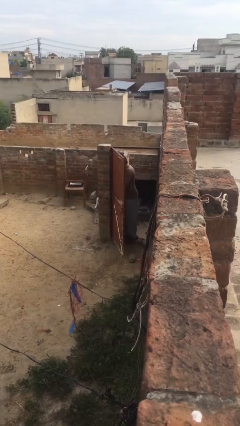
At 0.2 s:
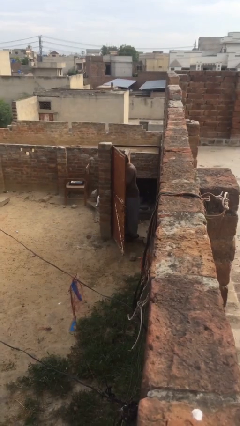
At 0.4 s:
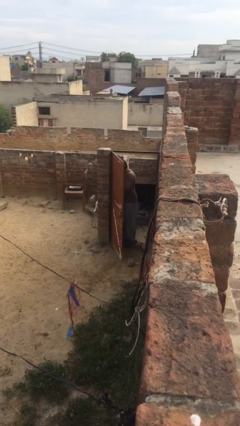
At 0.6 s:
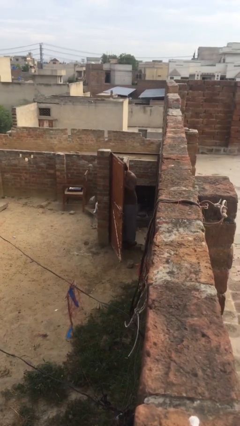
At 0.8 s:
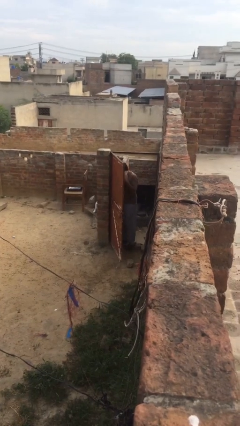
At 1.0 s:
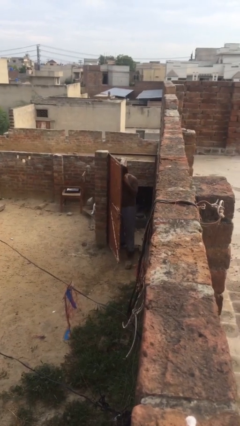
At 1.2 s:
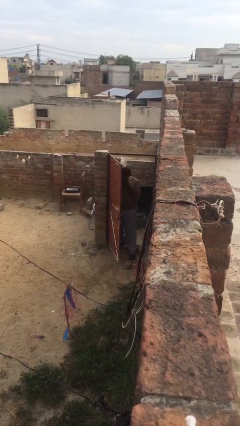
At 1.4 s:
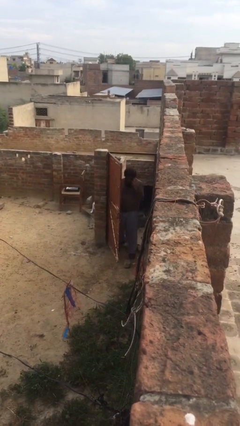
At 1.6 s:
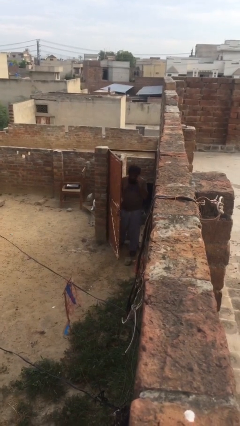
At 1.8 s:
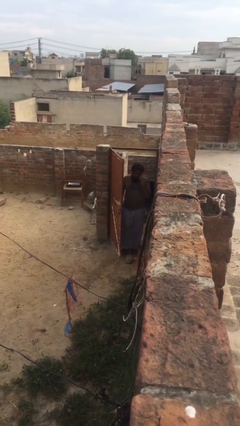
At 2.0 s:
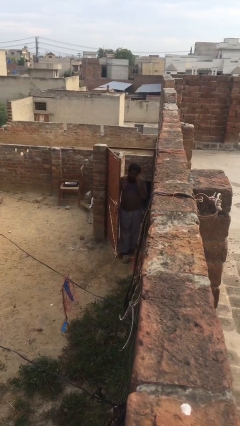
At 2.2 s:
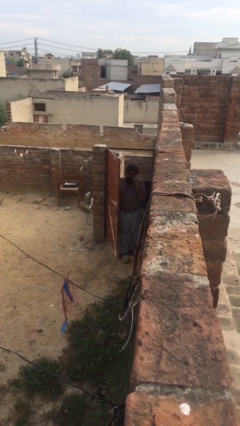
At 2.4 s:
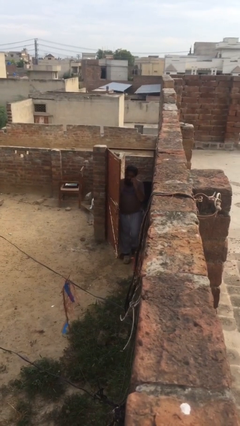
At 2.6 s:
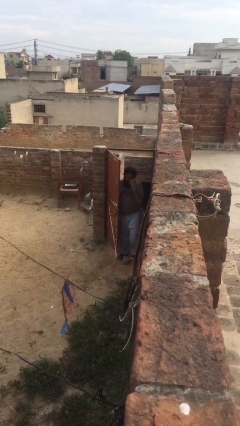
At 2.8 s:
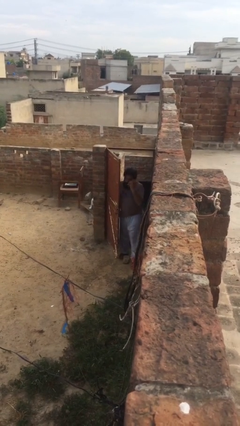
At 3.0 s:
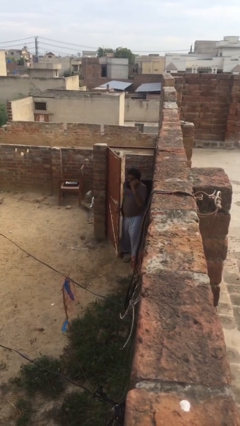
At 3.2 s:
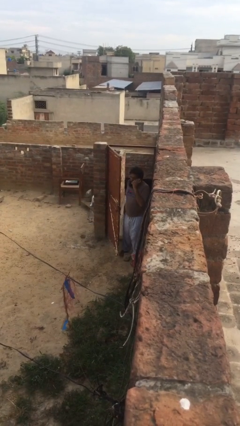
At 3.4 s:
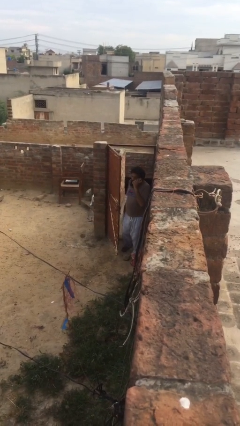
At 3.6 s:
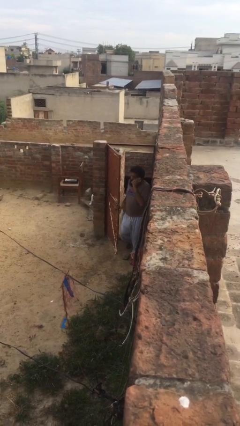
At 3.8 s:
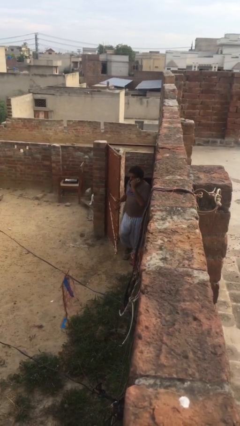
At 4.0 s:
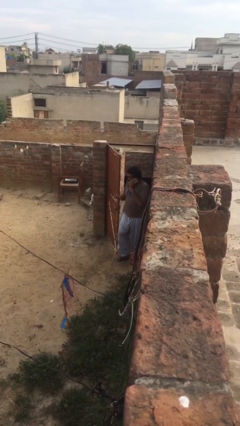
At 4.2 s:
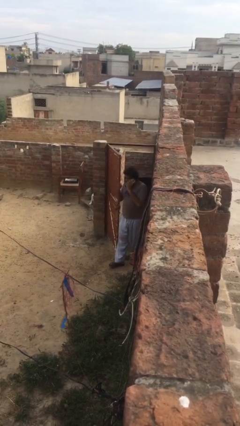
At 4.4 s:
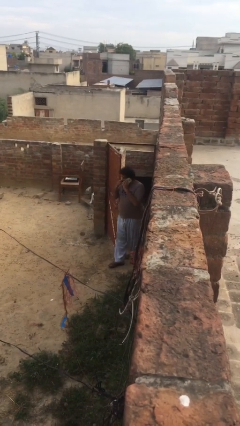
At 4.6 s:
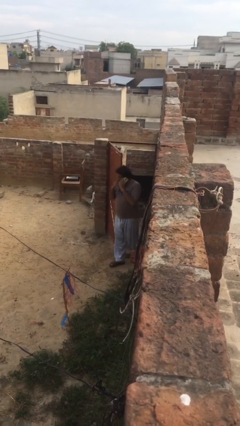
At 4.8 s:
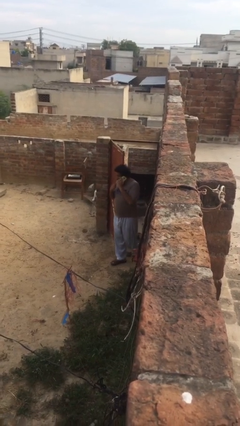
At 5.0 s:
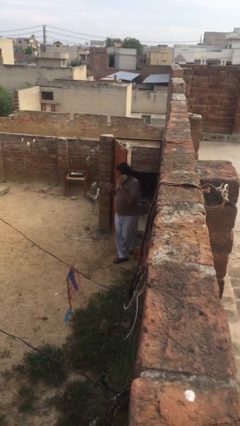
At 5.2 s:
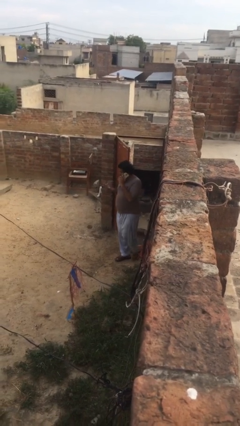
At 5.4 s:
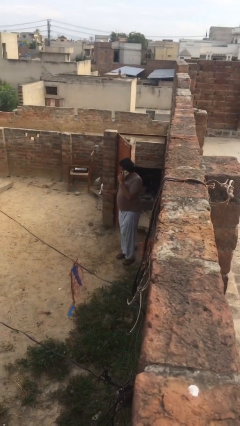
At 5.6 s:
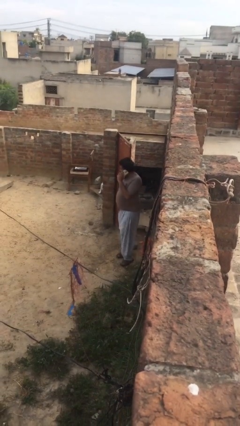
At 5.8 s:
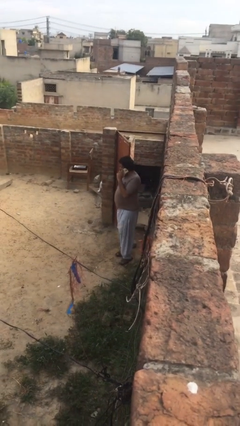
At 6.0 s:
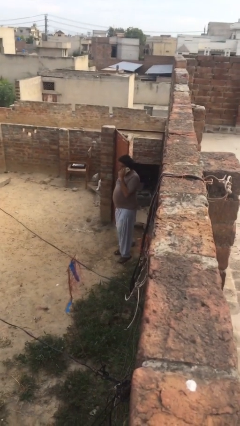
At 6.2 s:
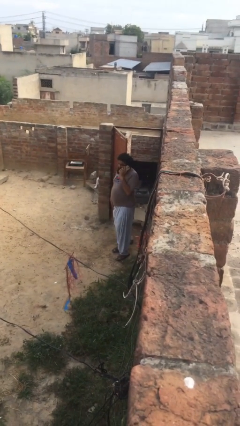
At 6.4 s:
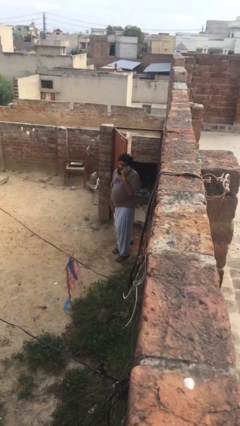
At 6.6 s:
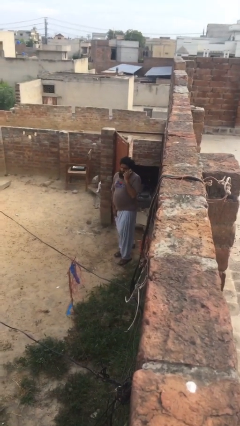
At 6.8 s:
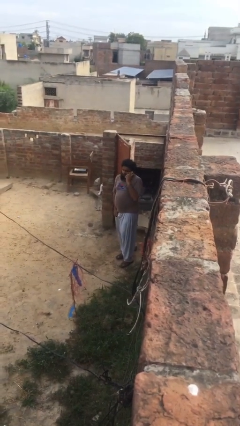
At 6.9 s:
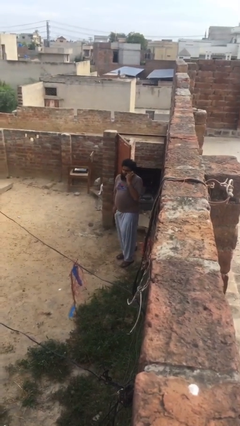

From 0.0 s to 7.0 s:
person enters scene through structure

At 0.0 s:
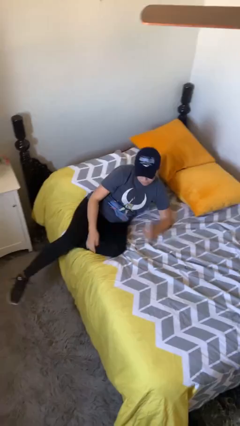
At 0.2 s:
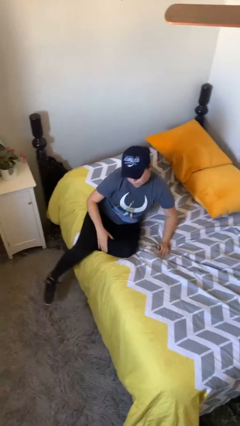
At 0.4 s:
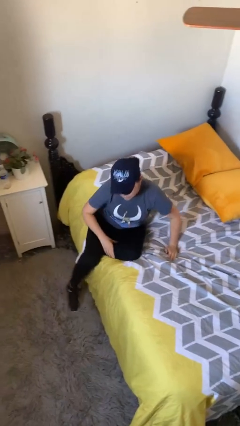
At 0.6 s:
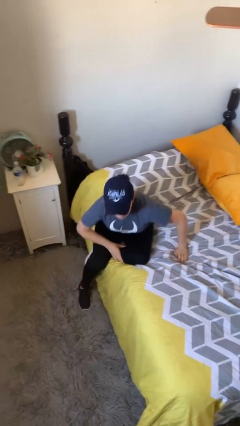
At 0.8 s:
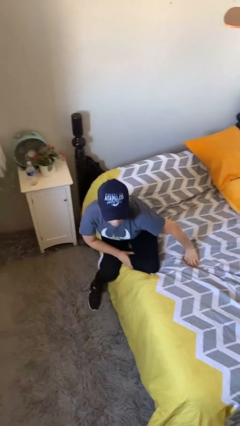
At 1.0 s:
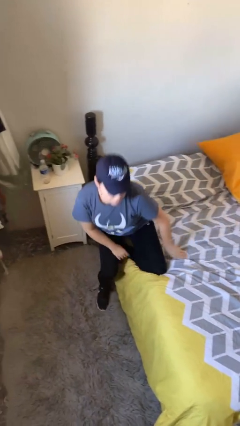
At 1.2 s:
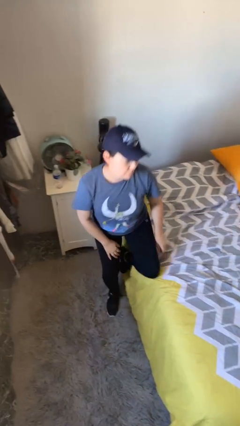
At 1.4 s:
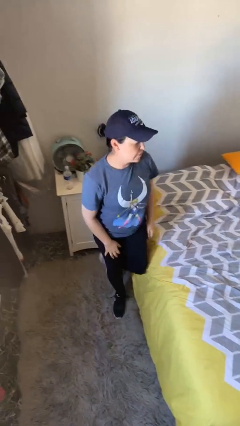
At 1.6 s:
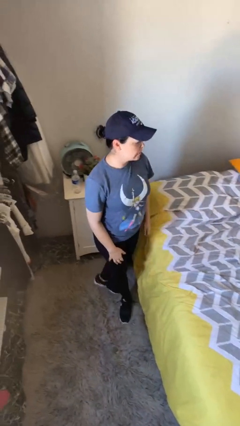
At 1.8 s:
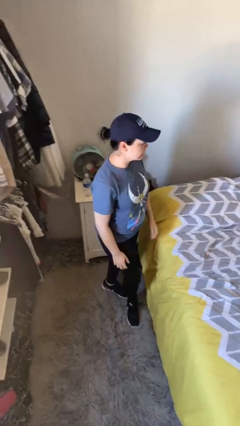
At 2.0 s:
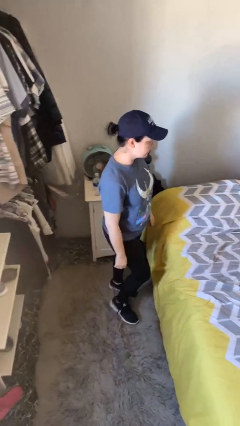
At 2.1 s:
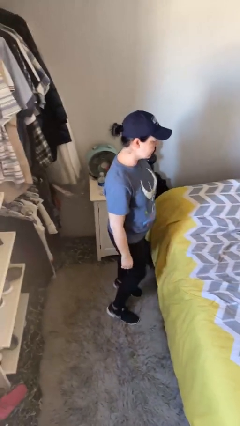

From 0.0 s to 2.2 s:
person stands up

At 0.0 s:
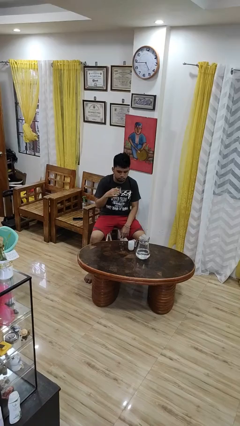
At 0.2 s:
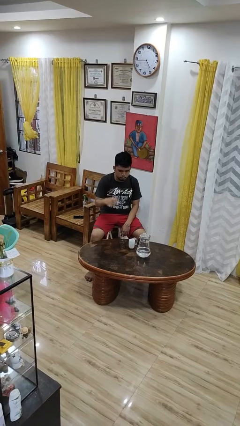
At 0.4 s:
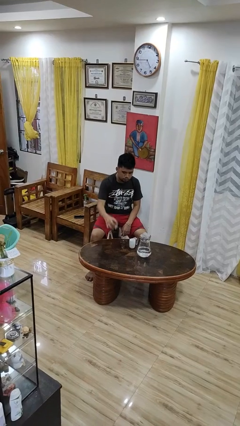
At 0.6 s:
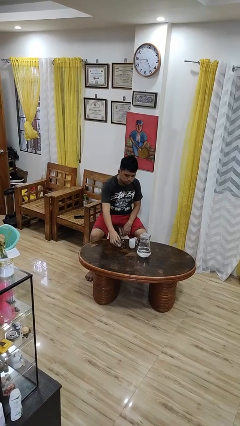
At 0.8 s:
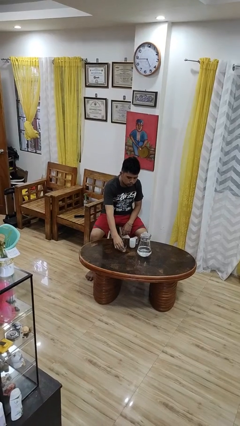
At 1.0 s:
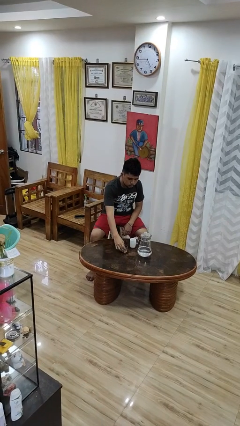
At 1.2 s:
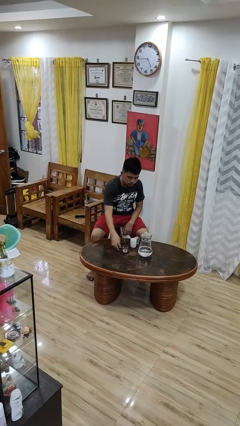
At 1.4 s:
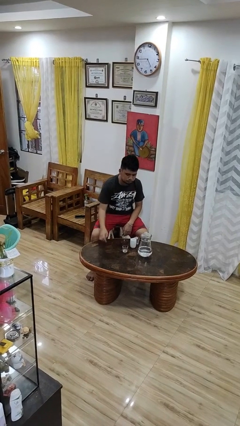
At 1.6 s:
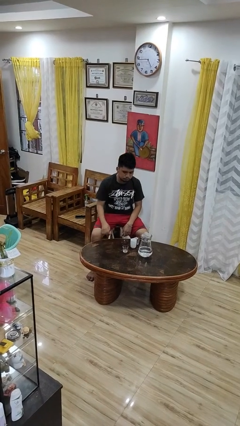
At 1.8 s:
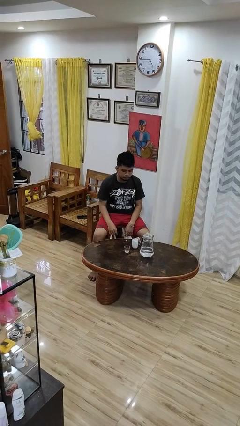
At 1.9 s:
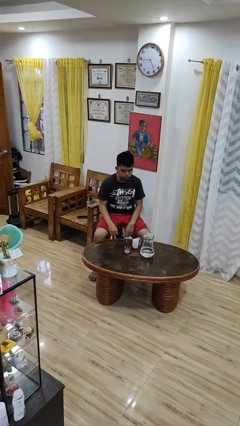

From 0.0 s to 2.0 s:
person puts down object on table

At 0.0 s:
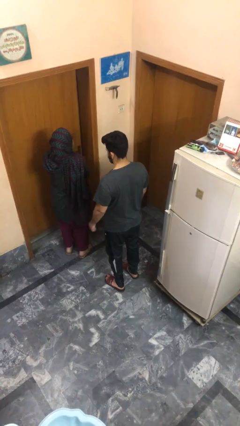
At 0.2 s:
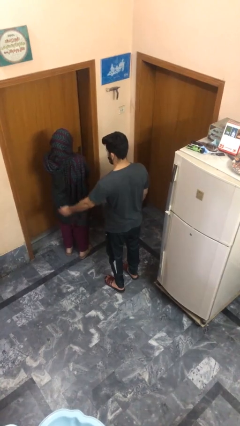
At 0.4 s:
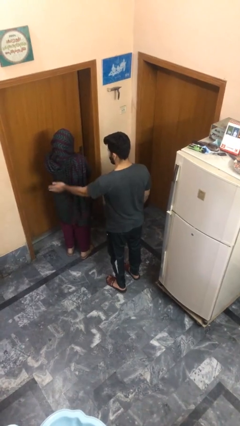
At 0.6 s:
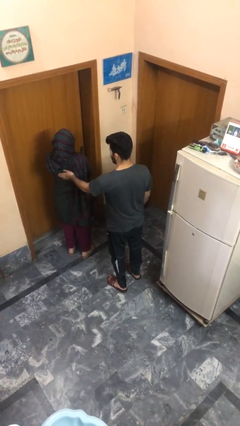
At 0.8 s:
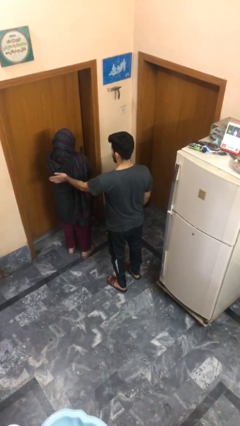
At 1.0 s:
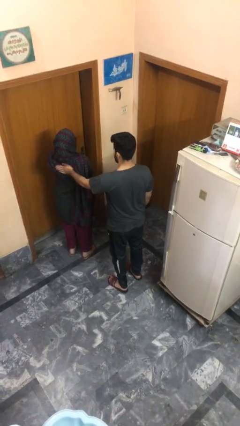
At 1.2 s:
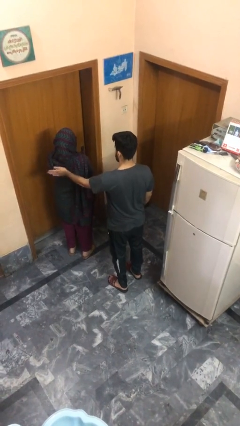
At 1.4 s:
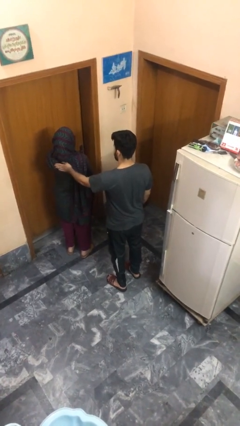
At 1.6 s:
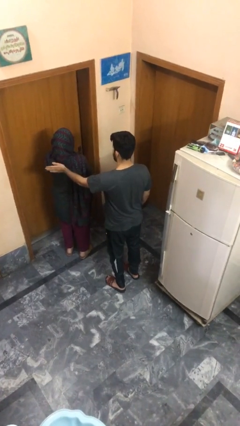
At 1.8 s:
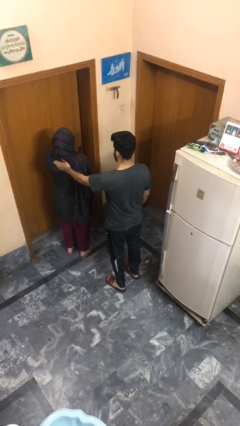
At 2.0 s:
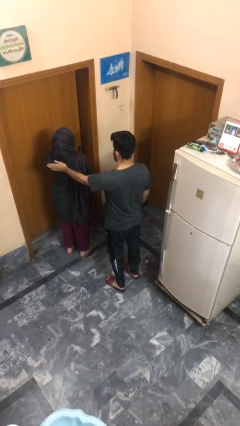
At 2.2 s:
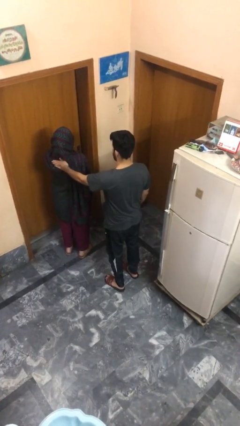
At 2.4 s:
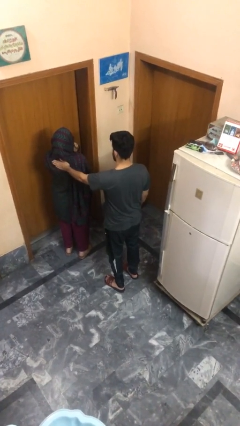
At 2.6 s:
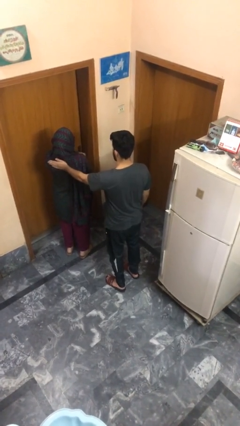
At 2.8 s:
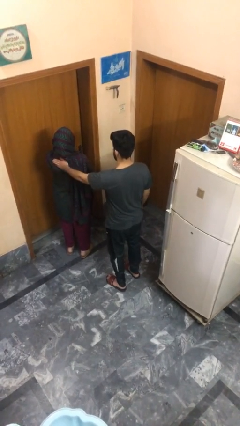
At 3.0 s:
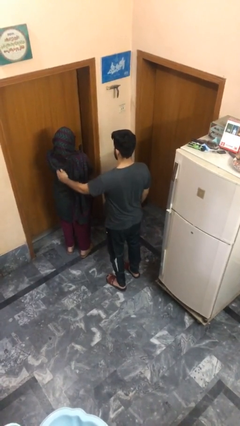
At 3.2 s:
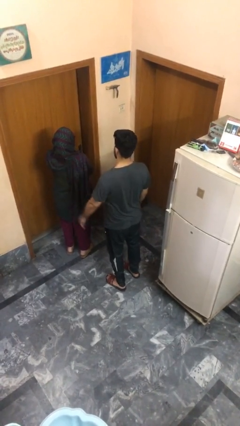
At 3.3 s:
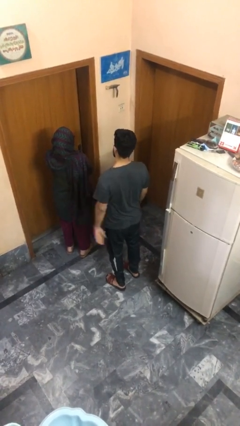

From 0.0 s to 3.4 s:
person touches back of person

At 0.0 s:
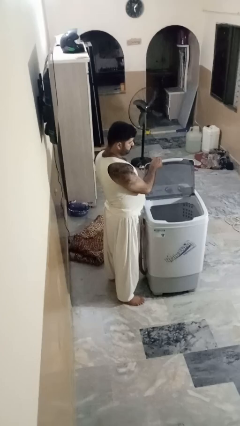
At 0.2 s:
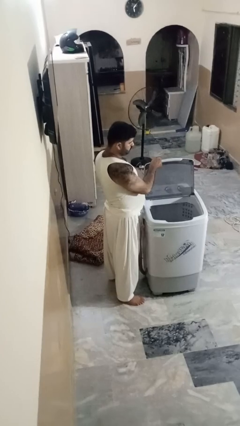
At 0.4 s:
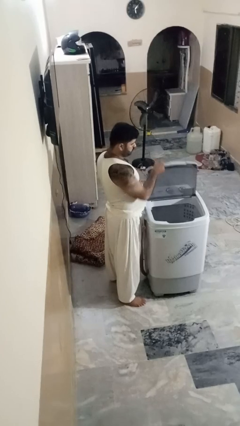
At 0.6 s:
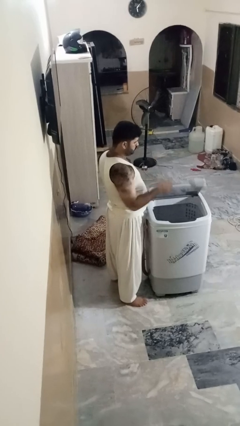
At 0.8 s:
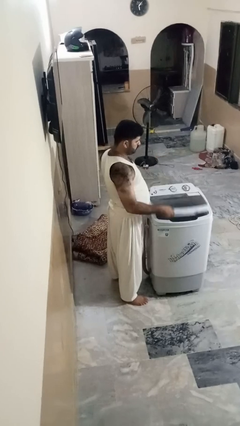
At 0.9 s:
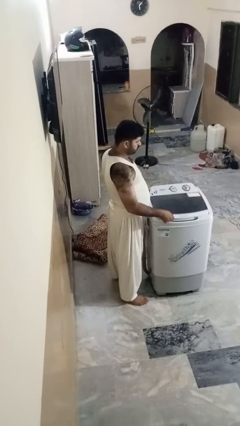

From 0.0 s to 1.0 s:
person closes clothes washer

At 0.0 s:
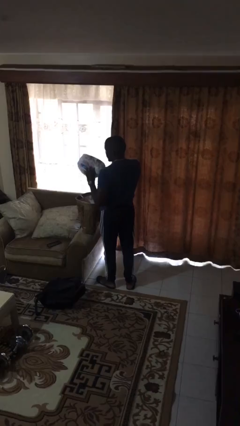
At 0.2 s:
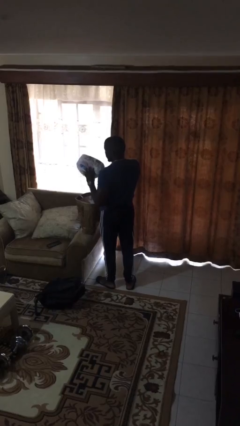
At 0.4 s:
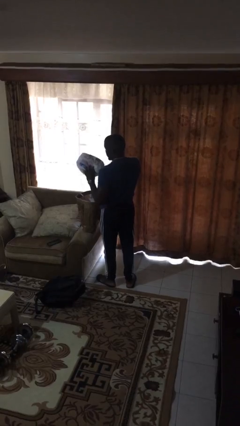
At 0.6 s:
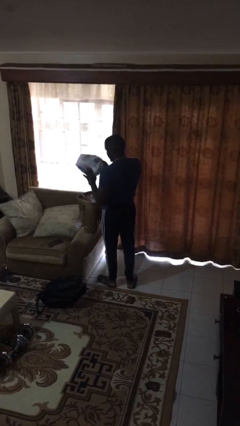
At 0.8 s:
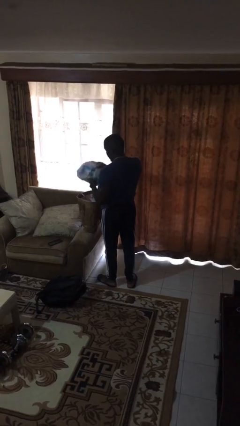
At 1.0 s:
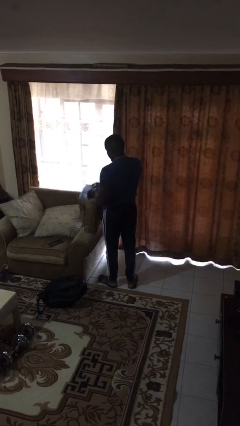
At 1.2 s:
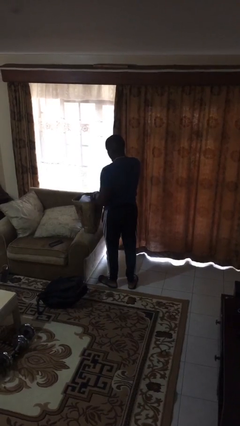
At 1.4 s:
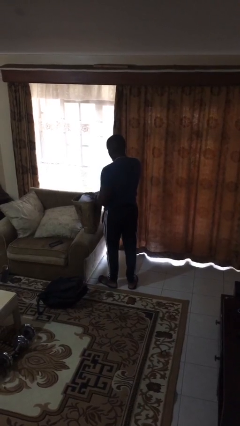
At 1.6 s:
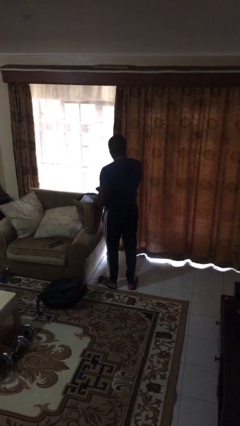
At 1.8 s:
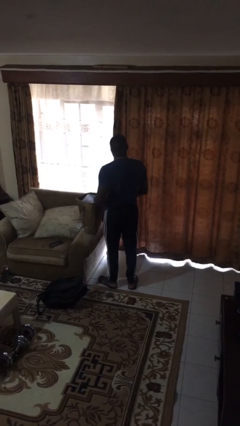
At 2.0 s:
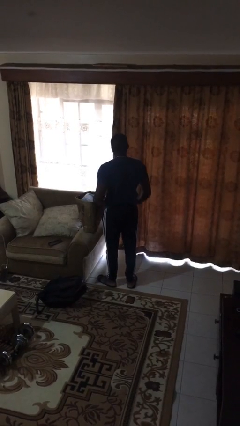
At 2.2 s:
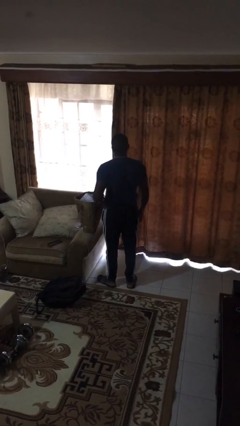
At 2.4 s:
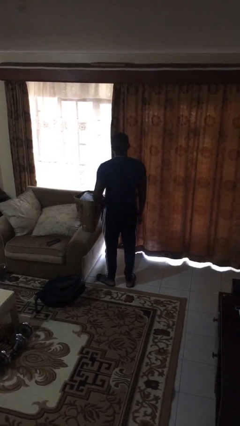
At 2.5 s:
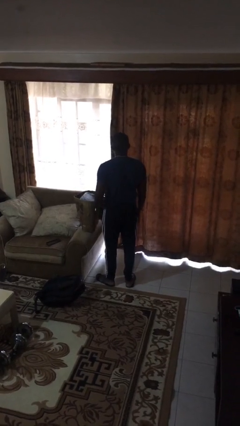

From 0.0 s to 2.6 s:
person puts object into bag
